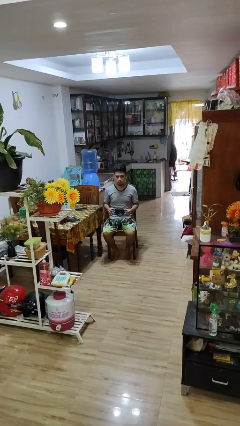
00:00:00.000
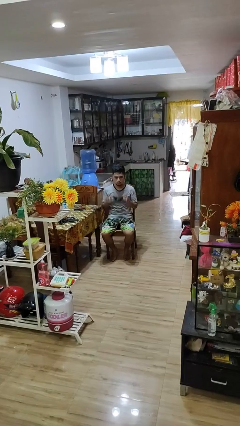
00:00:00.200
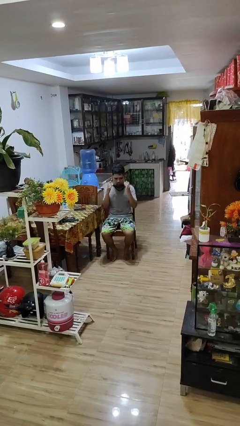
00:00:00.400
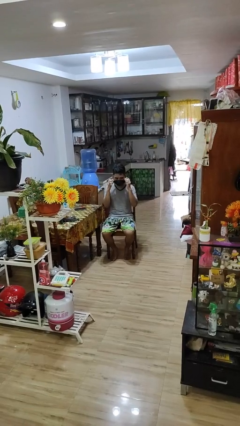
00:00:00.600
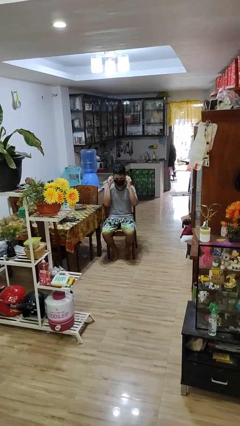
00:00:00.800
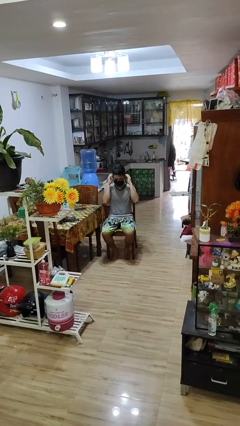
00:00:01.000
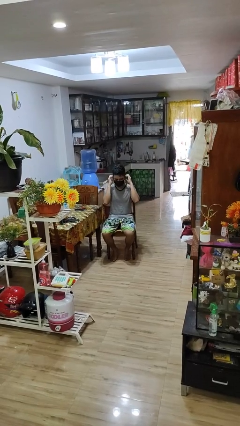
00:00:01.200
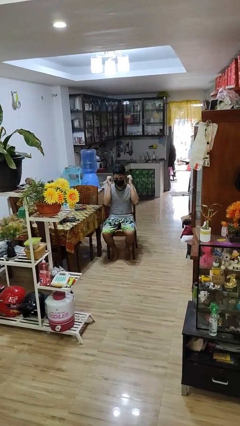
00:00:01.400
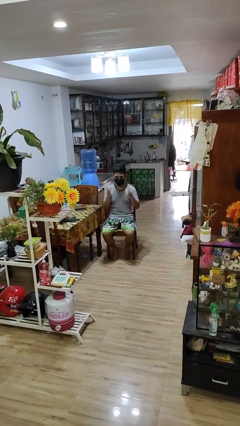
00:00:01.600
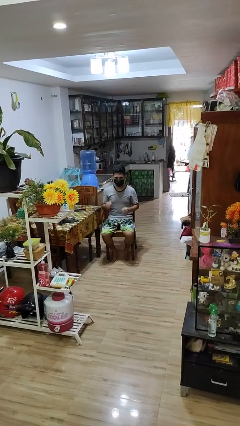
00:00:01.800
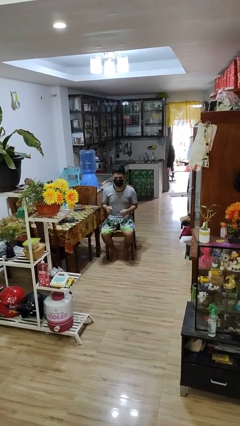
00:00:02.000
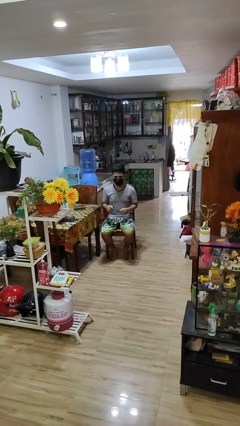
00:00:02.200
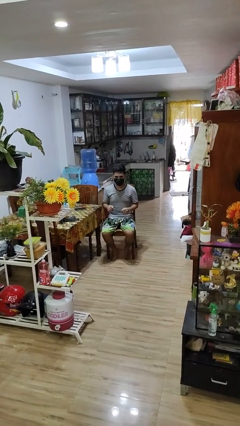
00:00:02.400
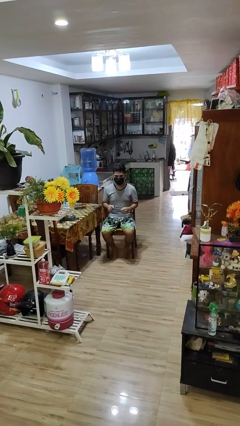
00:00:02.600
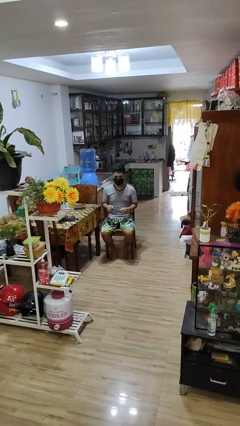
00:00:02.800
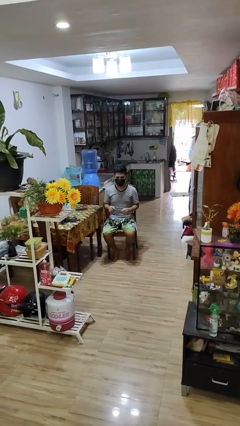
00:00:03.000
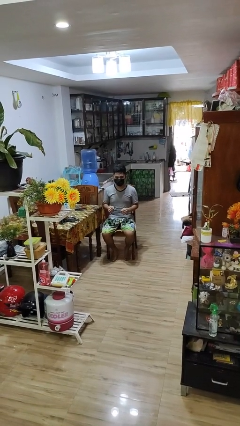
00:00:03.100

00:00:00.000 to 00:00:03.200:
person puts on facemask

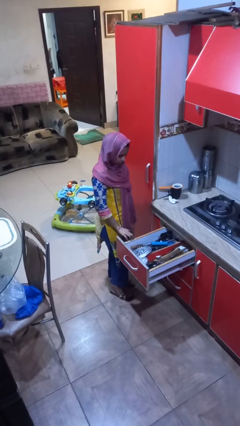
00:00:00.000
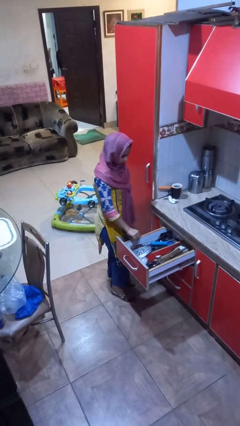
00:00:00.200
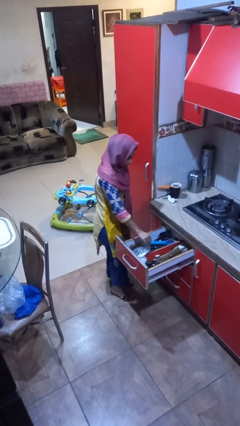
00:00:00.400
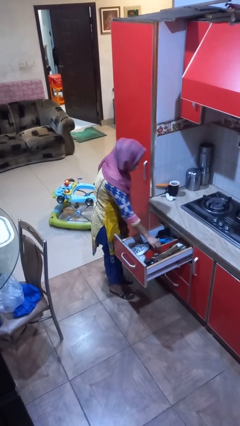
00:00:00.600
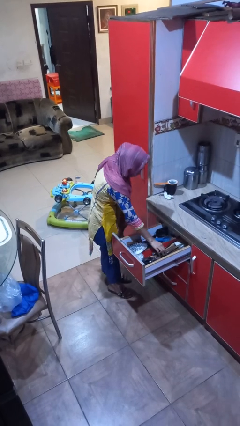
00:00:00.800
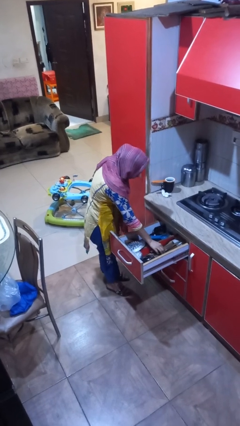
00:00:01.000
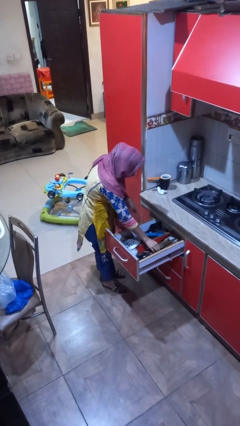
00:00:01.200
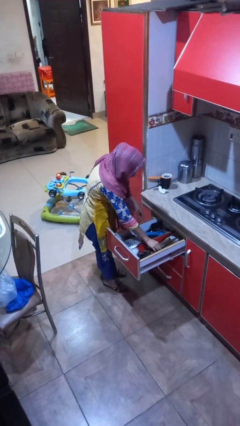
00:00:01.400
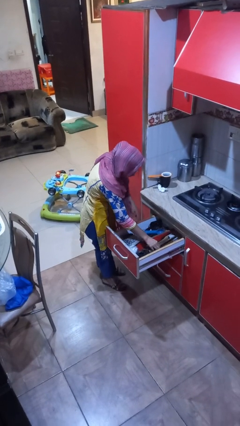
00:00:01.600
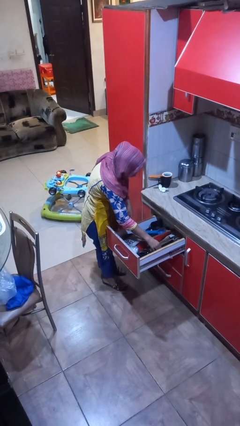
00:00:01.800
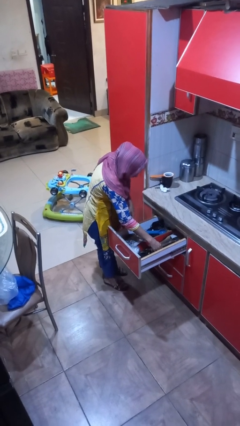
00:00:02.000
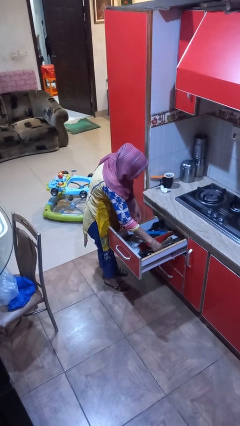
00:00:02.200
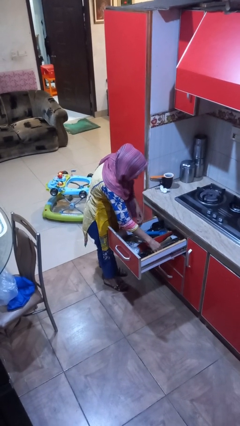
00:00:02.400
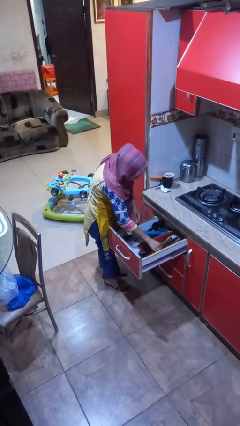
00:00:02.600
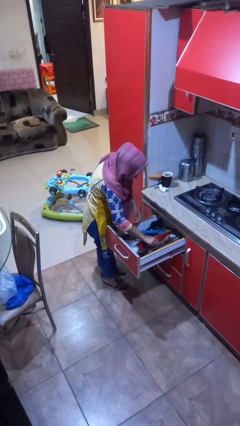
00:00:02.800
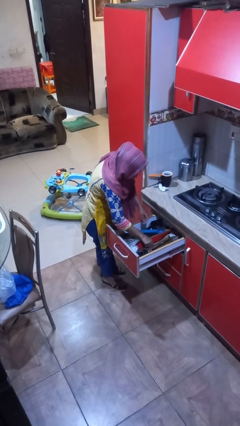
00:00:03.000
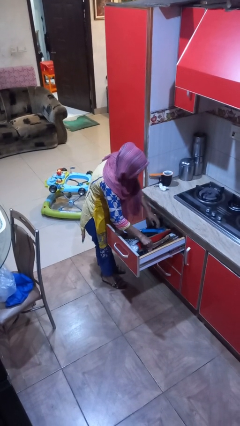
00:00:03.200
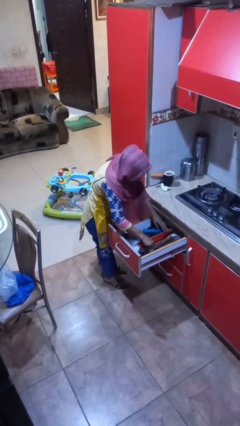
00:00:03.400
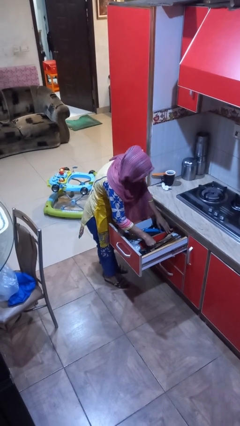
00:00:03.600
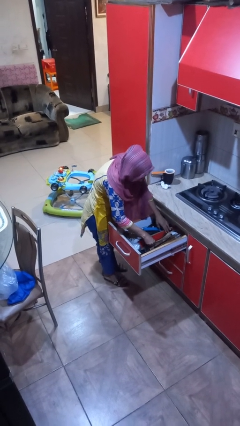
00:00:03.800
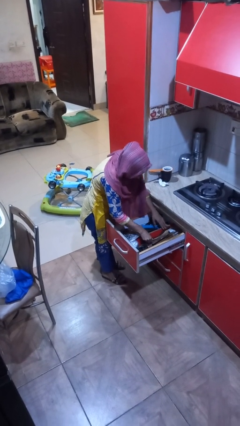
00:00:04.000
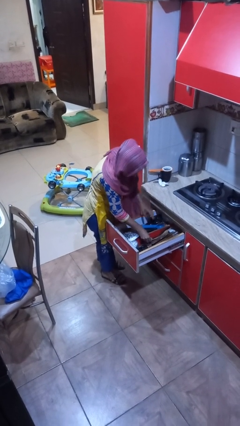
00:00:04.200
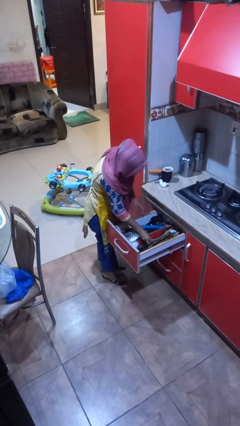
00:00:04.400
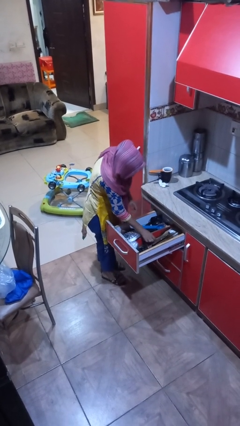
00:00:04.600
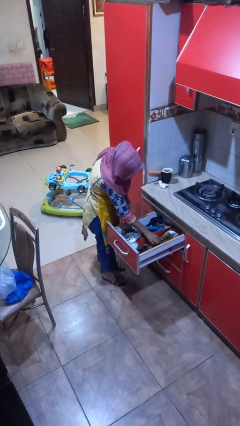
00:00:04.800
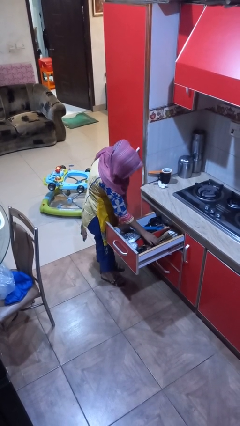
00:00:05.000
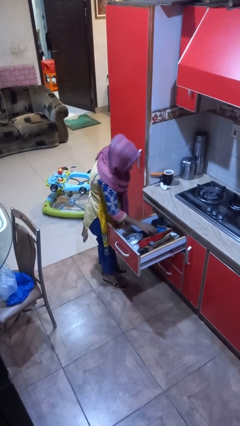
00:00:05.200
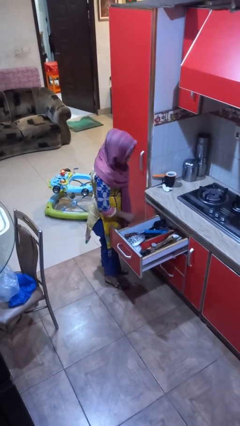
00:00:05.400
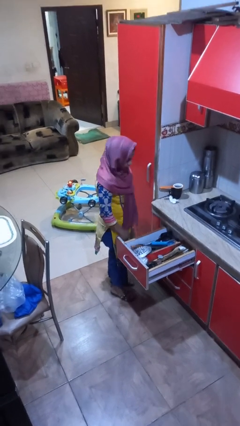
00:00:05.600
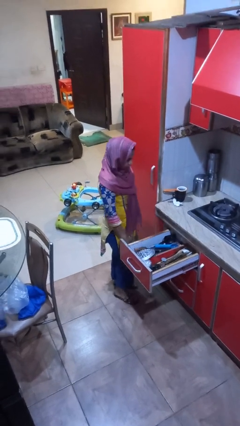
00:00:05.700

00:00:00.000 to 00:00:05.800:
person searches in kitchen drawer

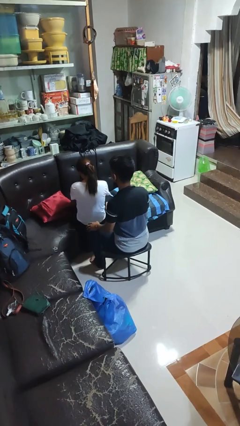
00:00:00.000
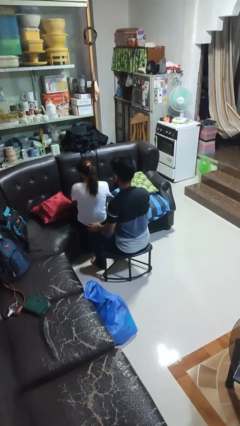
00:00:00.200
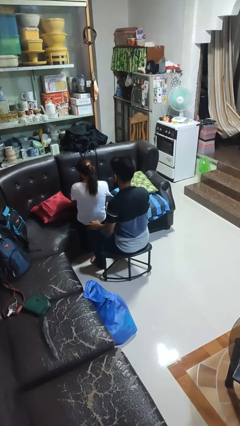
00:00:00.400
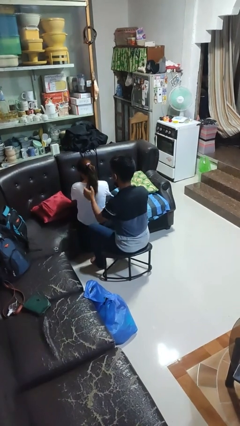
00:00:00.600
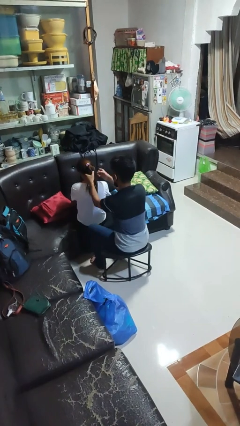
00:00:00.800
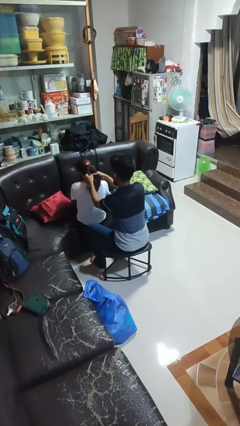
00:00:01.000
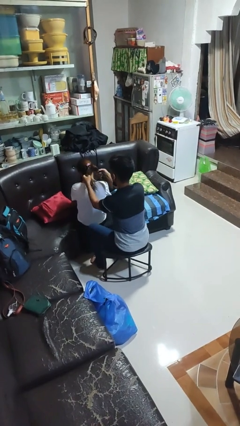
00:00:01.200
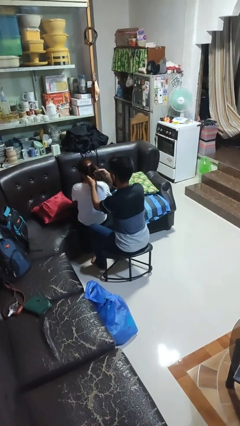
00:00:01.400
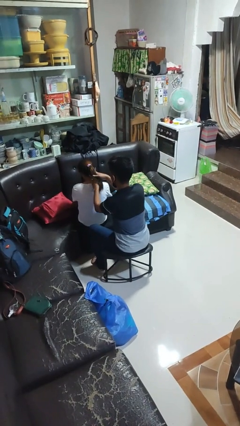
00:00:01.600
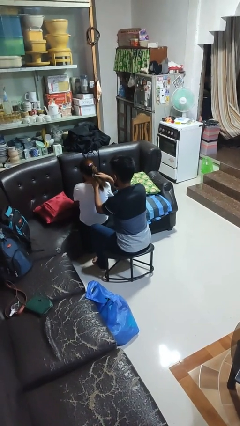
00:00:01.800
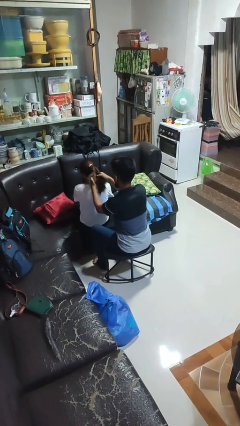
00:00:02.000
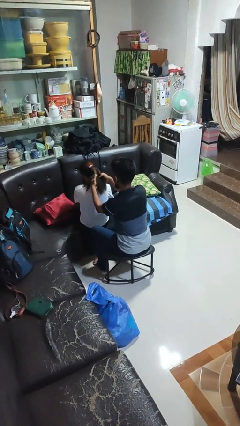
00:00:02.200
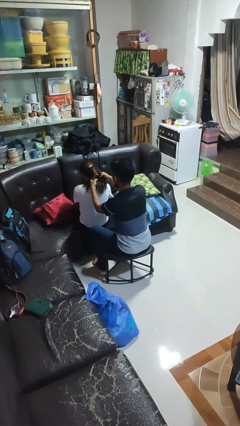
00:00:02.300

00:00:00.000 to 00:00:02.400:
person braids hair of person

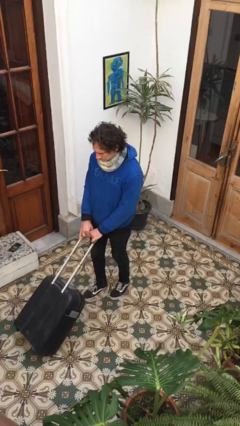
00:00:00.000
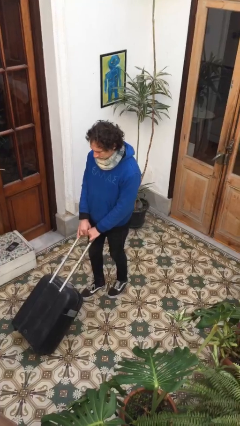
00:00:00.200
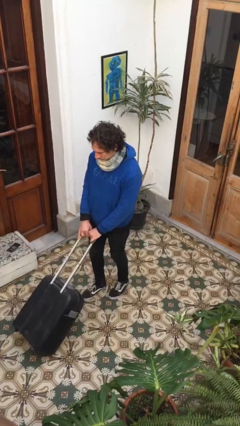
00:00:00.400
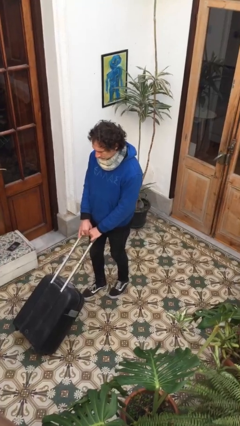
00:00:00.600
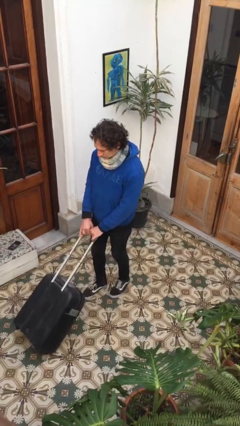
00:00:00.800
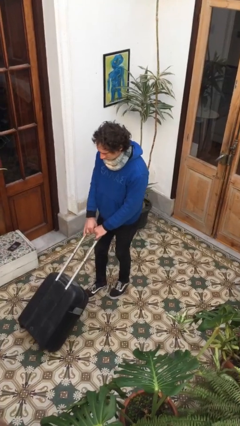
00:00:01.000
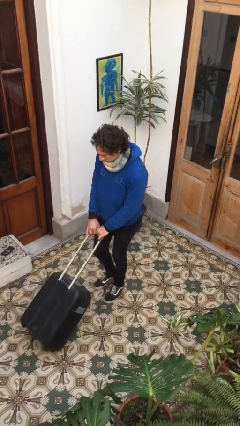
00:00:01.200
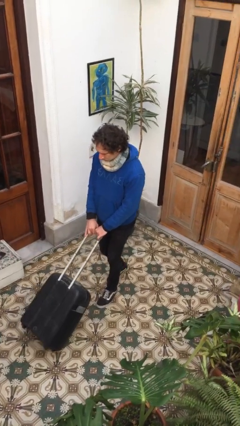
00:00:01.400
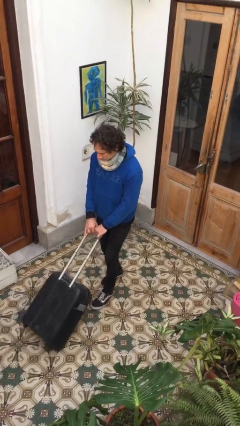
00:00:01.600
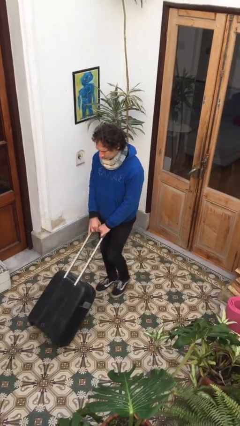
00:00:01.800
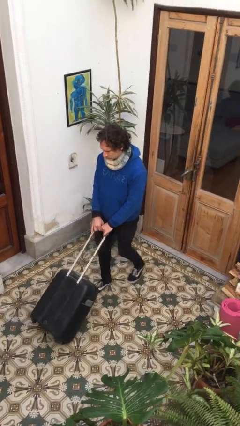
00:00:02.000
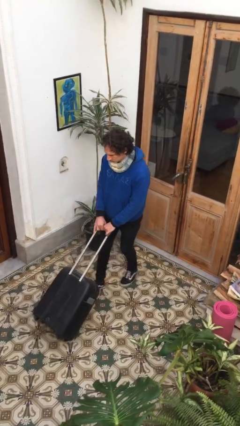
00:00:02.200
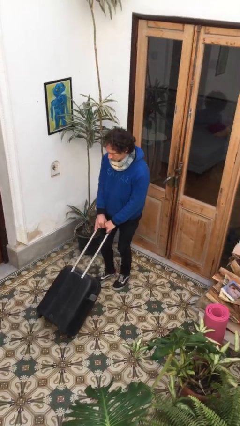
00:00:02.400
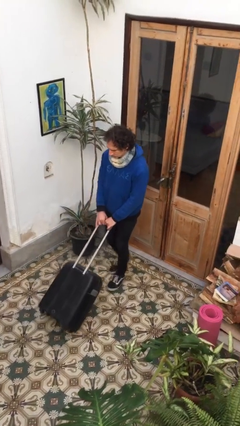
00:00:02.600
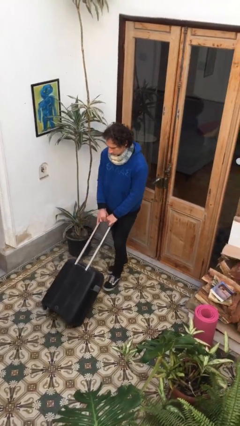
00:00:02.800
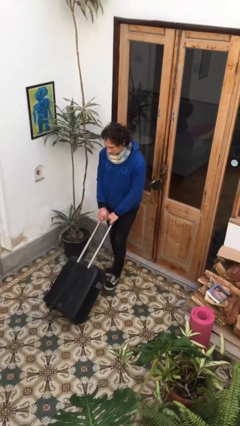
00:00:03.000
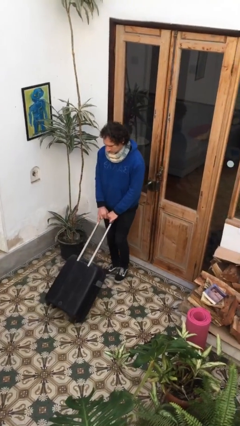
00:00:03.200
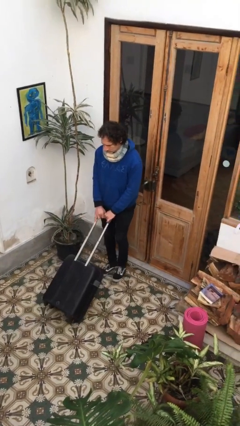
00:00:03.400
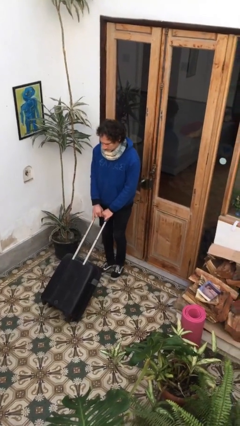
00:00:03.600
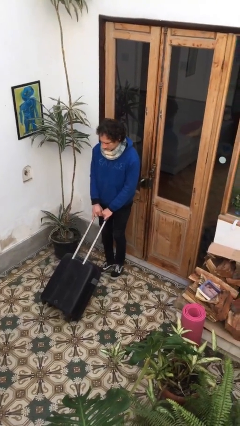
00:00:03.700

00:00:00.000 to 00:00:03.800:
person pulls wheeled cart

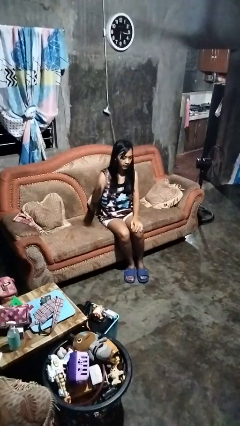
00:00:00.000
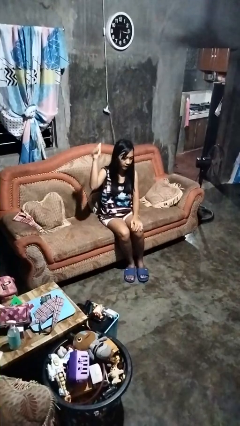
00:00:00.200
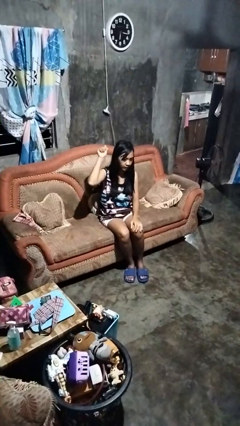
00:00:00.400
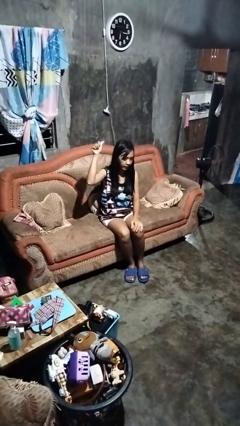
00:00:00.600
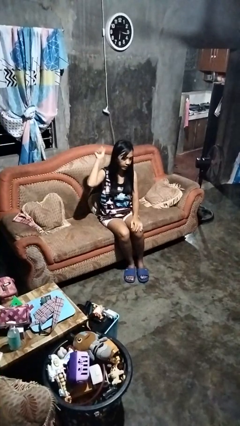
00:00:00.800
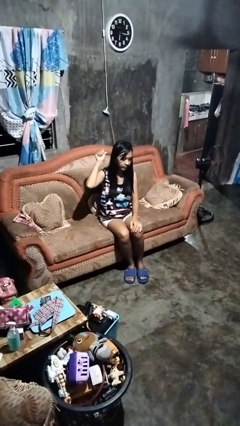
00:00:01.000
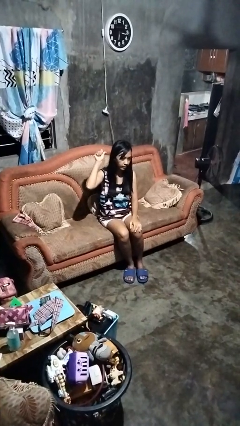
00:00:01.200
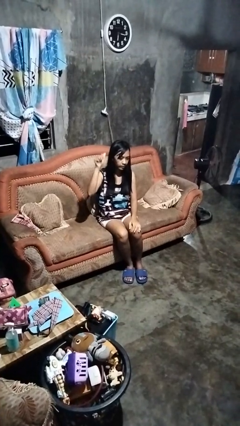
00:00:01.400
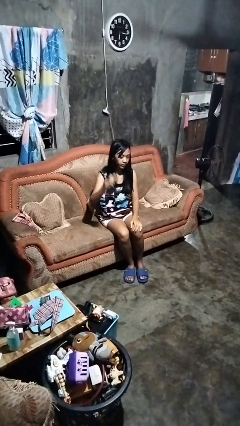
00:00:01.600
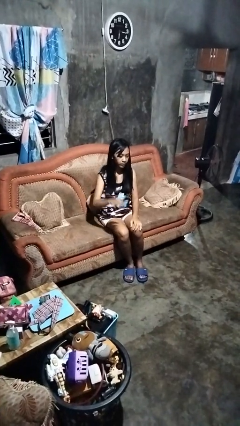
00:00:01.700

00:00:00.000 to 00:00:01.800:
person gestures behind me

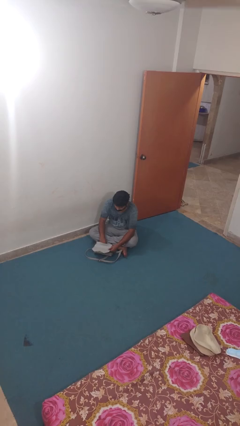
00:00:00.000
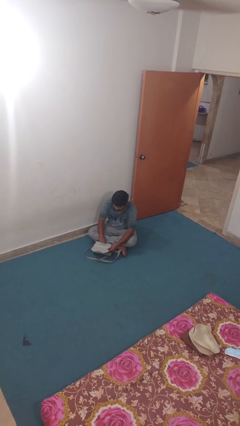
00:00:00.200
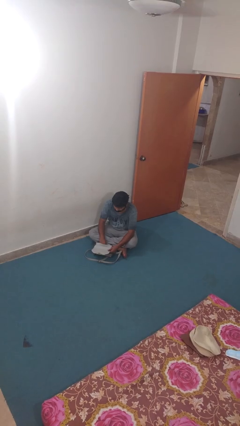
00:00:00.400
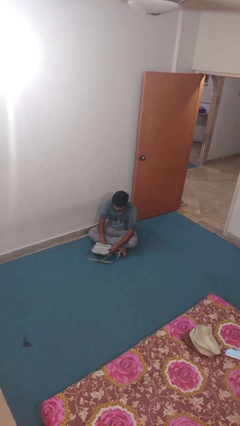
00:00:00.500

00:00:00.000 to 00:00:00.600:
person takes object from purse
